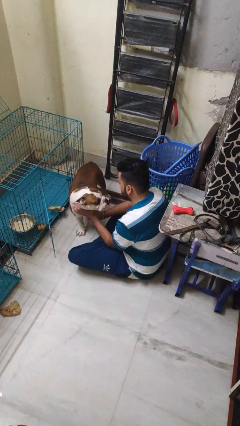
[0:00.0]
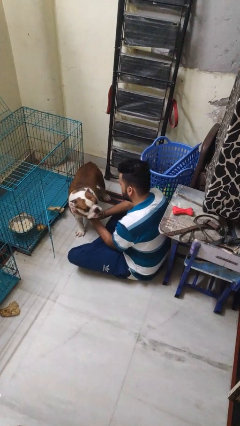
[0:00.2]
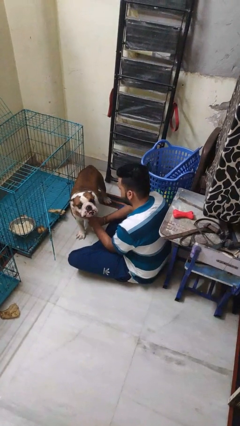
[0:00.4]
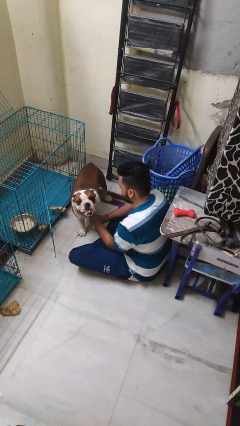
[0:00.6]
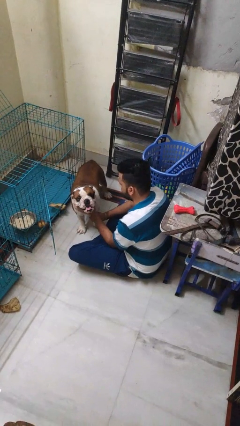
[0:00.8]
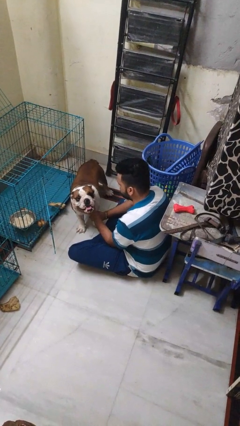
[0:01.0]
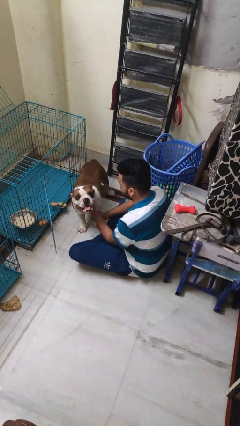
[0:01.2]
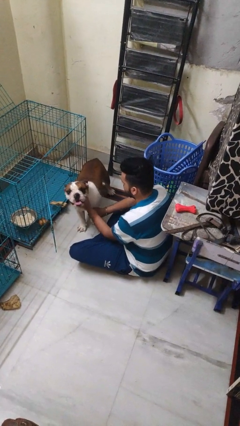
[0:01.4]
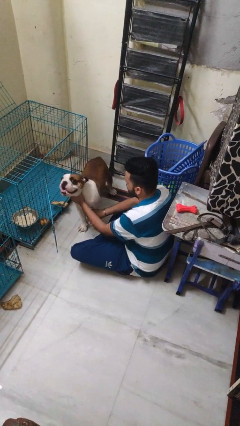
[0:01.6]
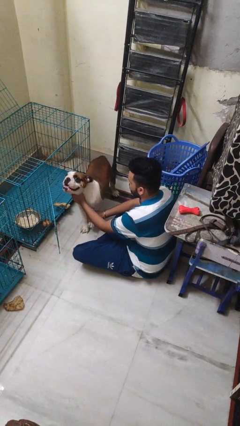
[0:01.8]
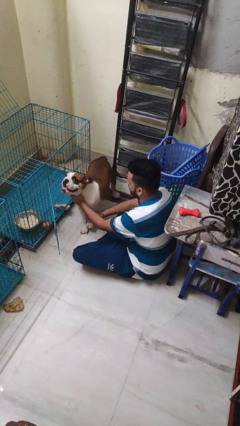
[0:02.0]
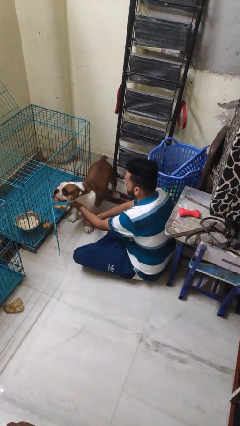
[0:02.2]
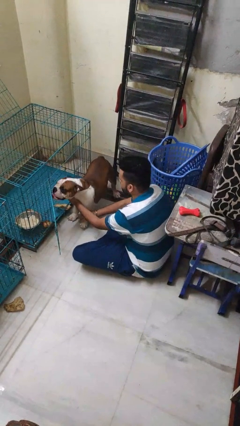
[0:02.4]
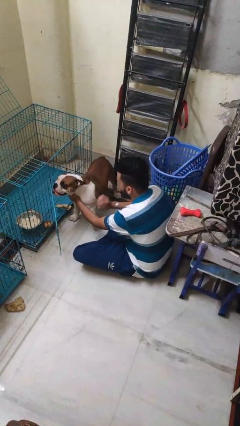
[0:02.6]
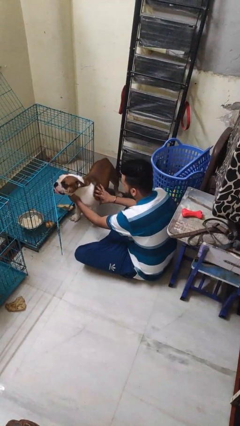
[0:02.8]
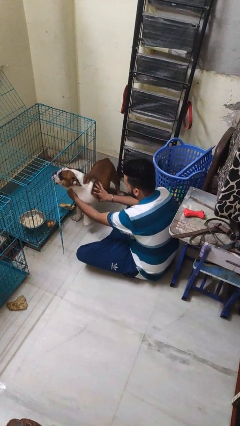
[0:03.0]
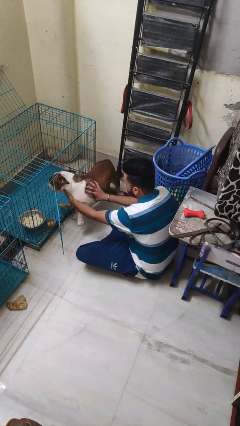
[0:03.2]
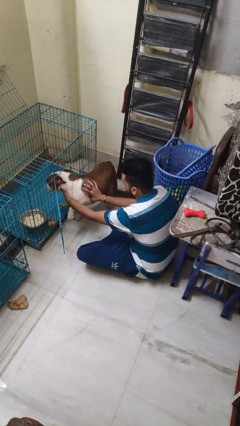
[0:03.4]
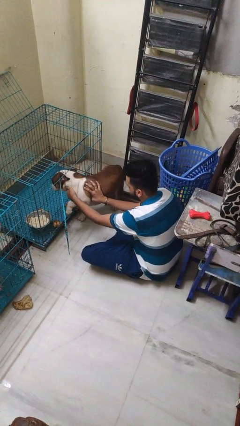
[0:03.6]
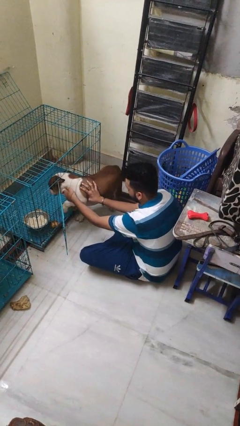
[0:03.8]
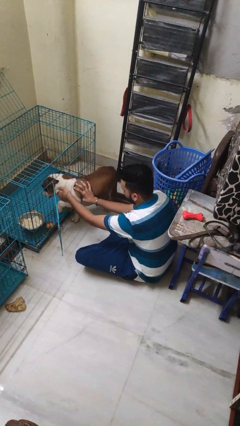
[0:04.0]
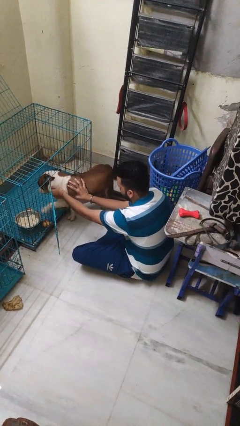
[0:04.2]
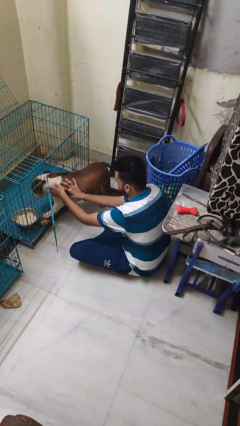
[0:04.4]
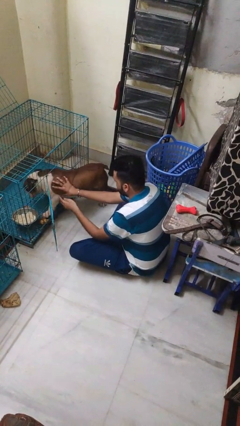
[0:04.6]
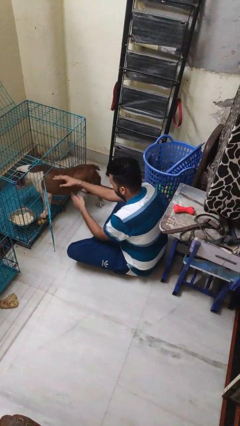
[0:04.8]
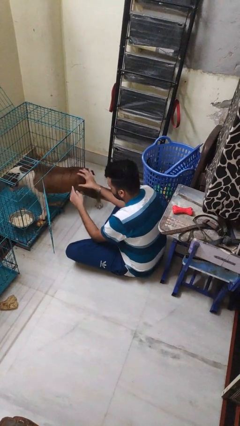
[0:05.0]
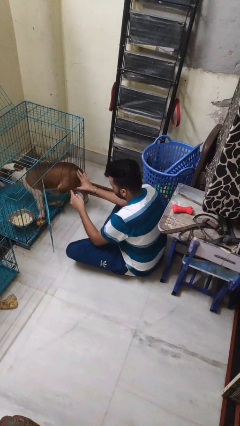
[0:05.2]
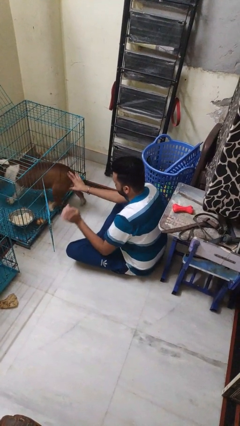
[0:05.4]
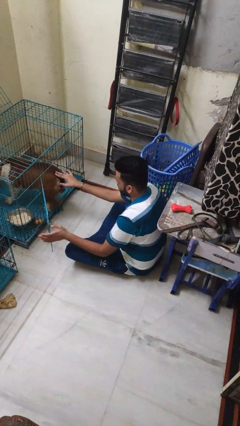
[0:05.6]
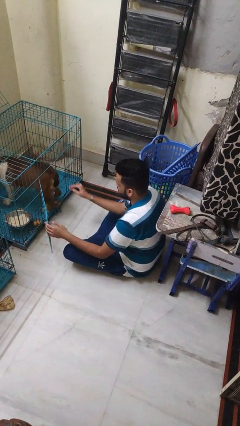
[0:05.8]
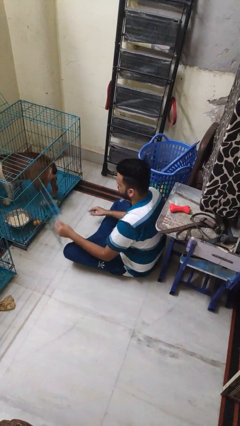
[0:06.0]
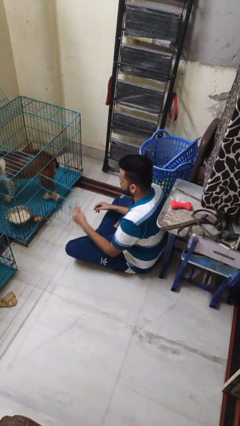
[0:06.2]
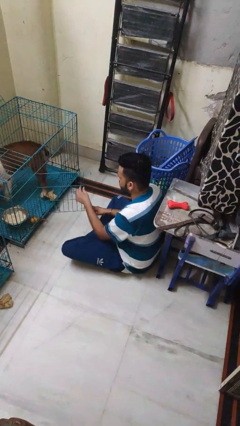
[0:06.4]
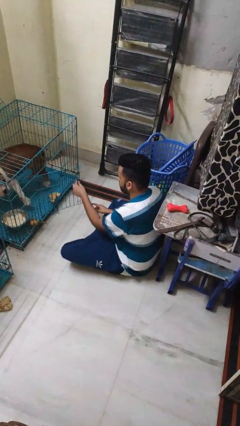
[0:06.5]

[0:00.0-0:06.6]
person crates dog

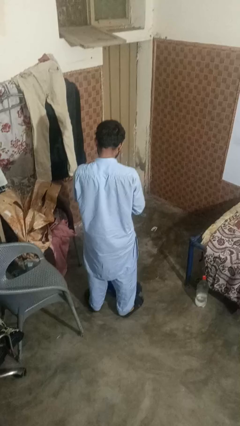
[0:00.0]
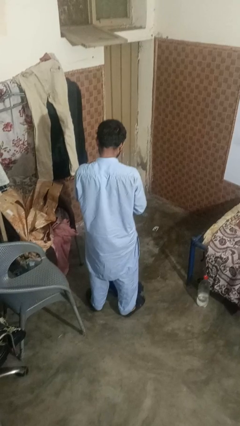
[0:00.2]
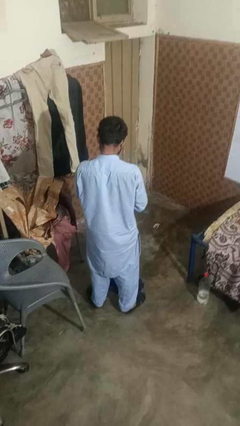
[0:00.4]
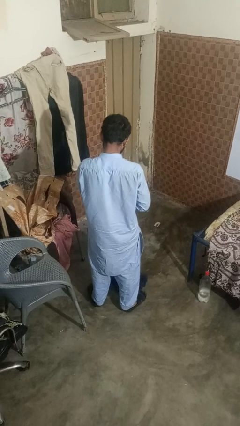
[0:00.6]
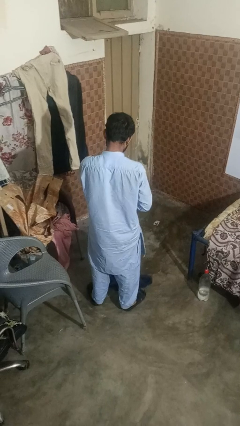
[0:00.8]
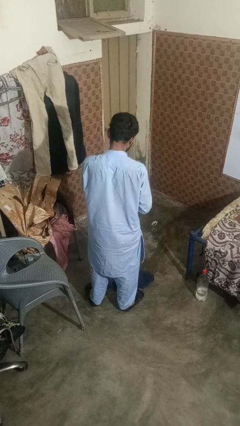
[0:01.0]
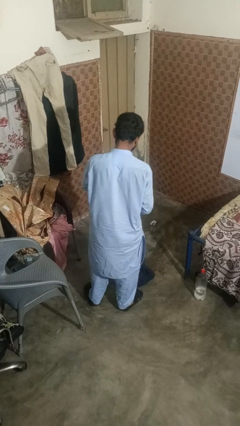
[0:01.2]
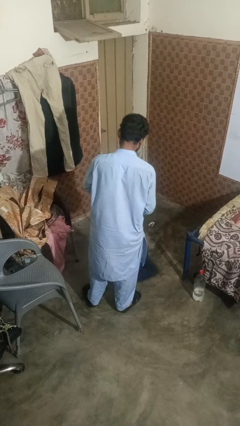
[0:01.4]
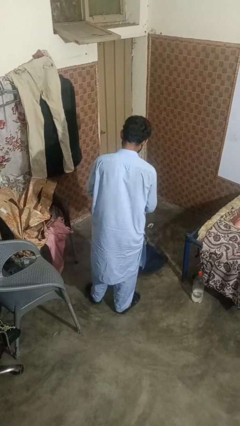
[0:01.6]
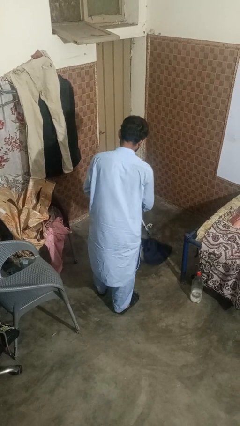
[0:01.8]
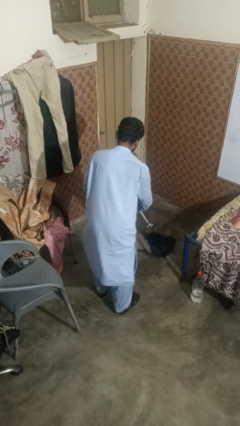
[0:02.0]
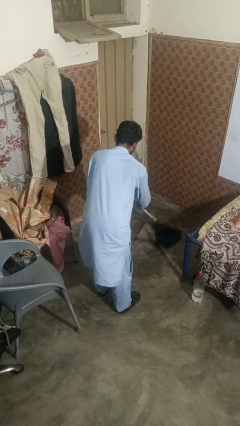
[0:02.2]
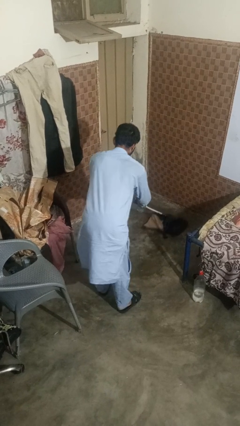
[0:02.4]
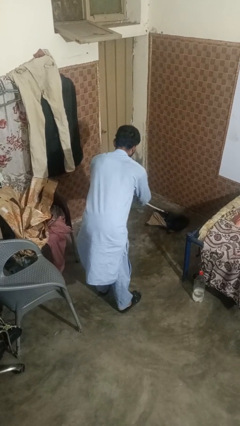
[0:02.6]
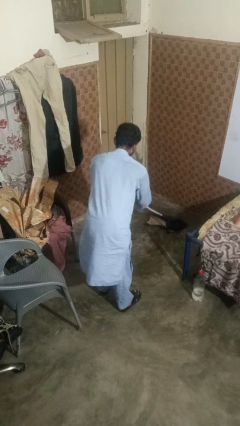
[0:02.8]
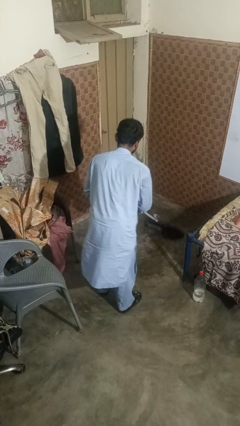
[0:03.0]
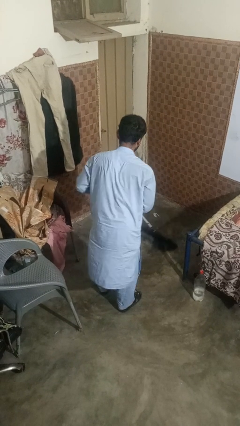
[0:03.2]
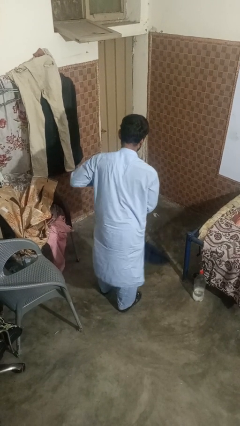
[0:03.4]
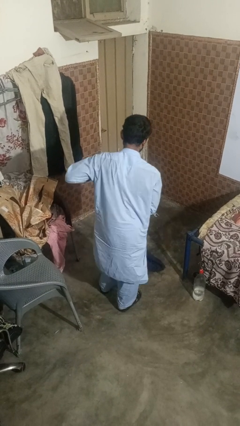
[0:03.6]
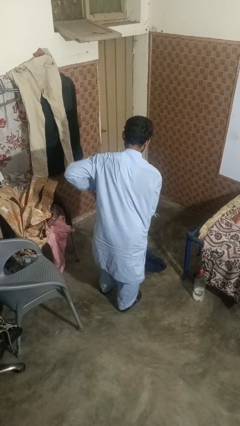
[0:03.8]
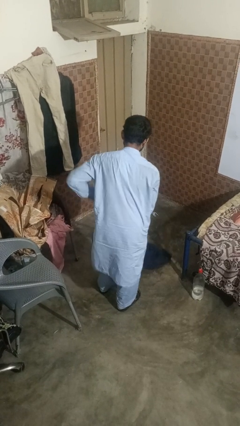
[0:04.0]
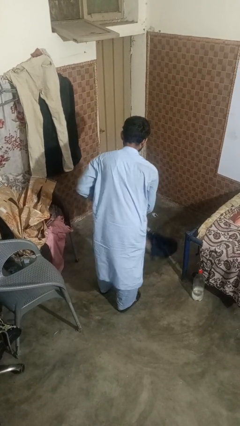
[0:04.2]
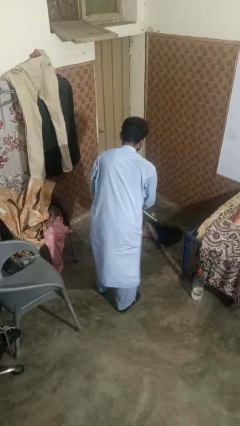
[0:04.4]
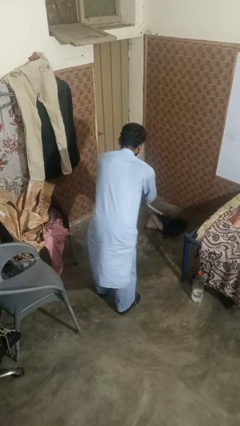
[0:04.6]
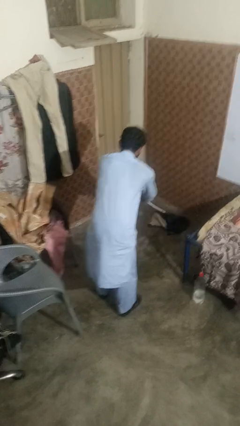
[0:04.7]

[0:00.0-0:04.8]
person mops

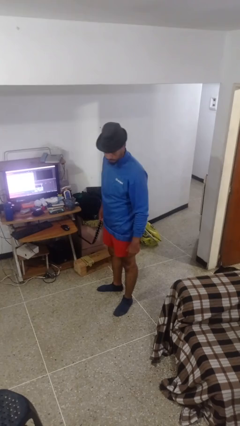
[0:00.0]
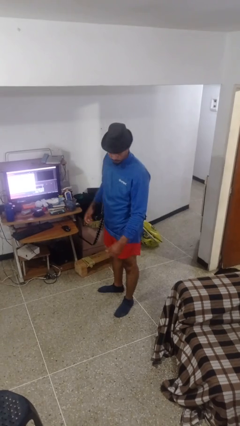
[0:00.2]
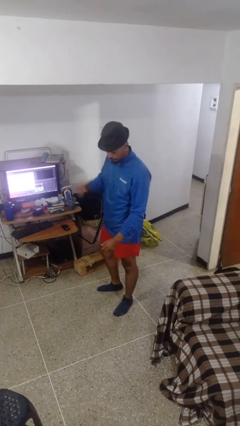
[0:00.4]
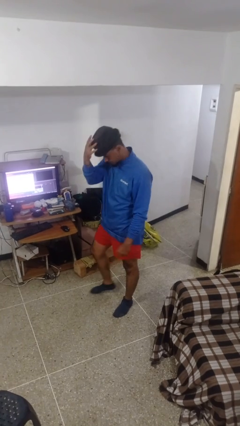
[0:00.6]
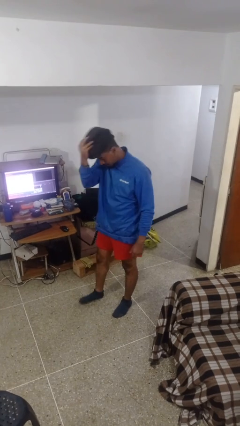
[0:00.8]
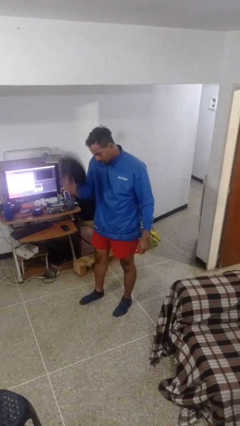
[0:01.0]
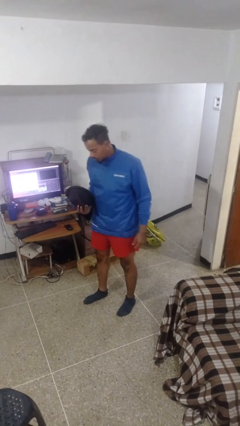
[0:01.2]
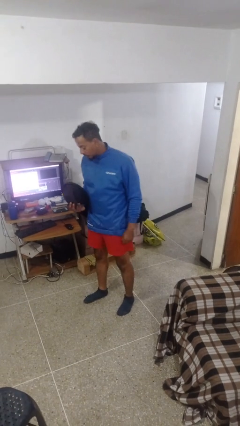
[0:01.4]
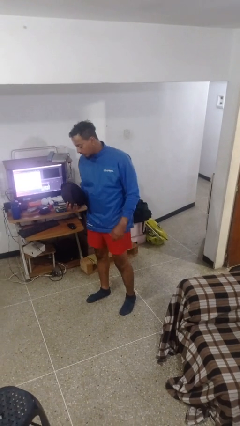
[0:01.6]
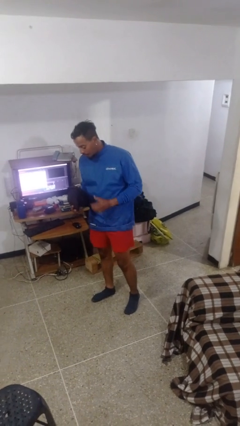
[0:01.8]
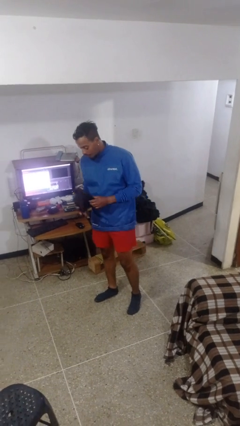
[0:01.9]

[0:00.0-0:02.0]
person takes off hat

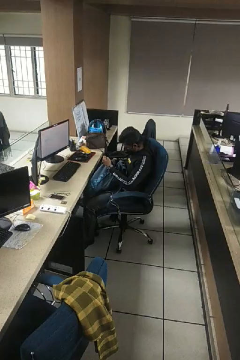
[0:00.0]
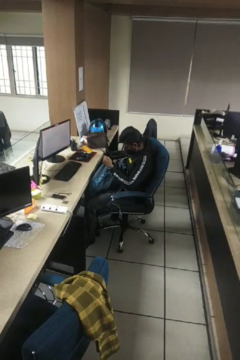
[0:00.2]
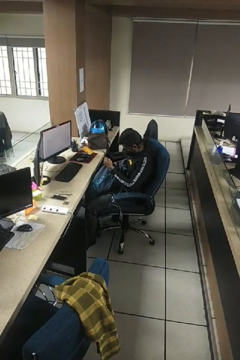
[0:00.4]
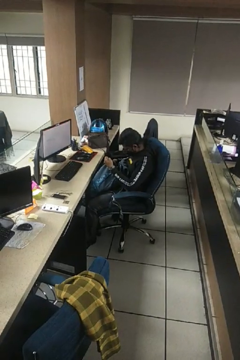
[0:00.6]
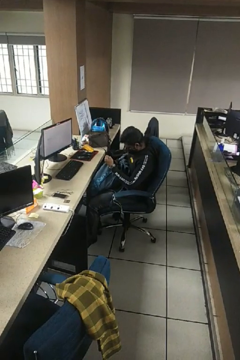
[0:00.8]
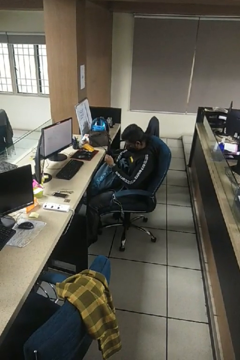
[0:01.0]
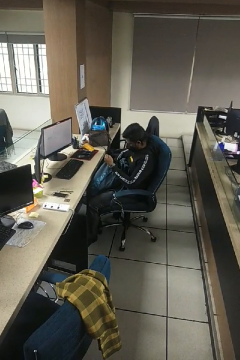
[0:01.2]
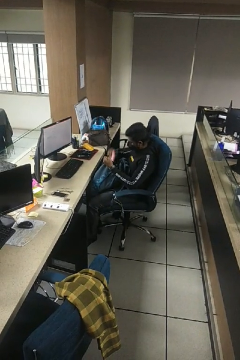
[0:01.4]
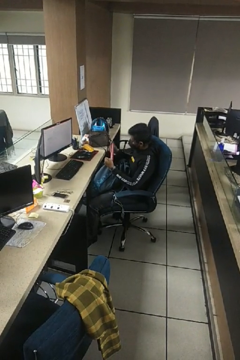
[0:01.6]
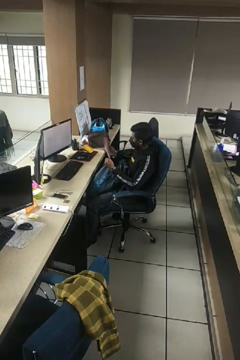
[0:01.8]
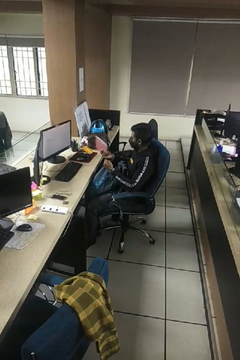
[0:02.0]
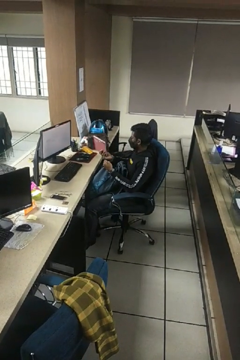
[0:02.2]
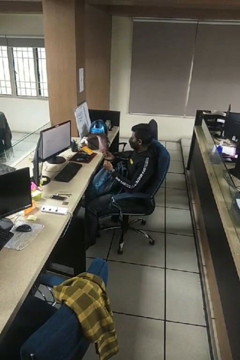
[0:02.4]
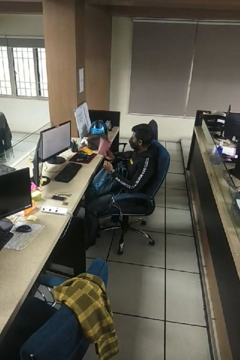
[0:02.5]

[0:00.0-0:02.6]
person takes object from backpack

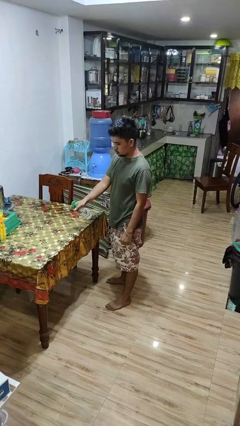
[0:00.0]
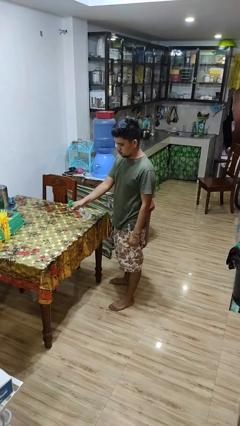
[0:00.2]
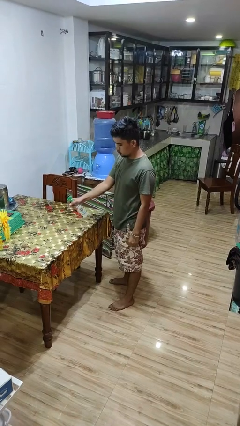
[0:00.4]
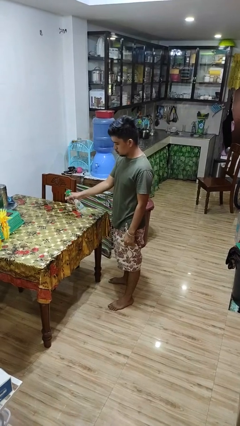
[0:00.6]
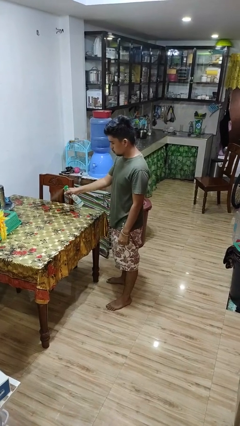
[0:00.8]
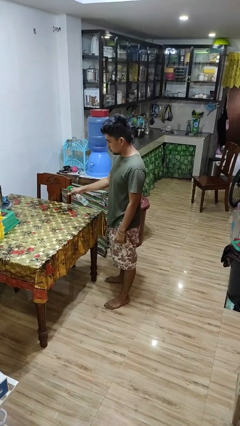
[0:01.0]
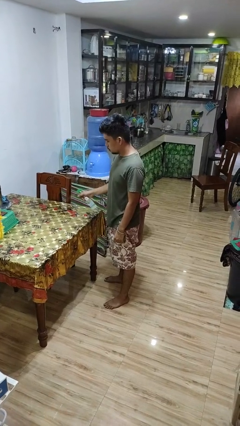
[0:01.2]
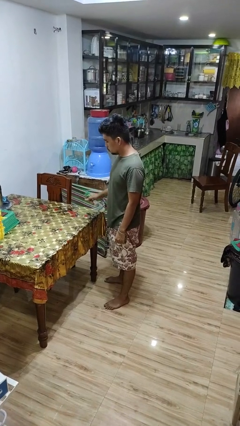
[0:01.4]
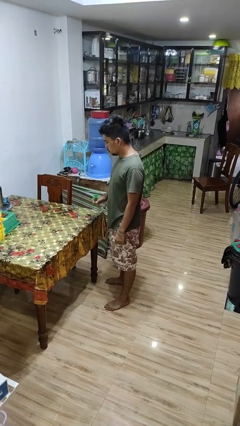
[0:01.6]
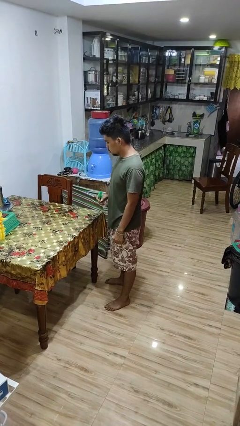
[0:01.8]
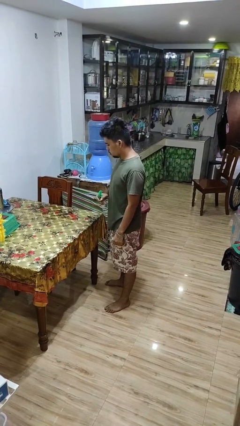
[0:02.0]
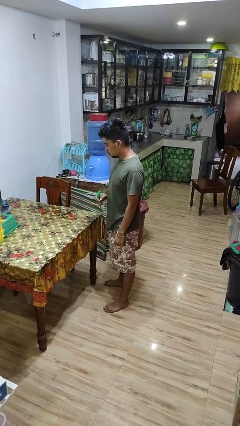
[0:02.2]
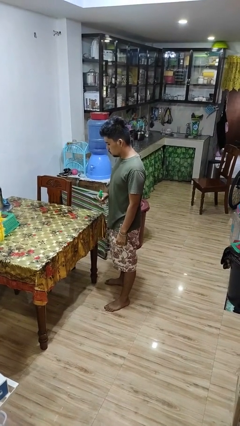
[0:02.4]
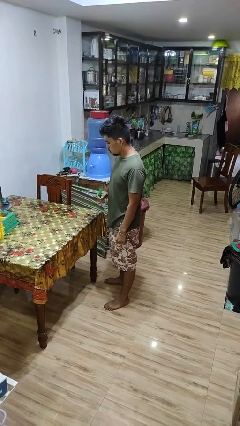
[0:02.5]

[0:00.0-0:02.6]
person sprays from bottle
